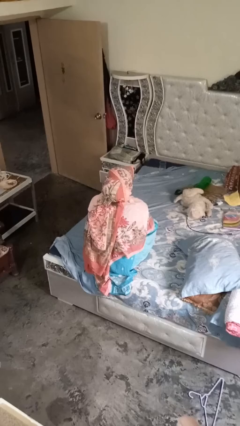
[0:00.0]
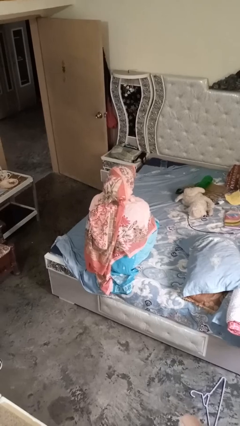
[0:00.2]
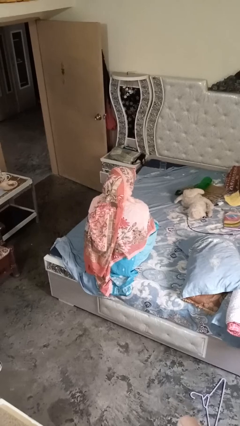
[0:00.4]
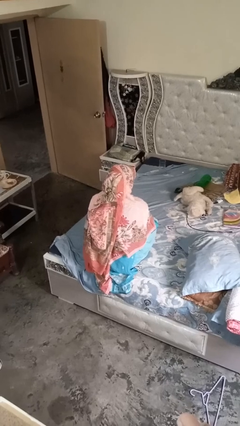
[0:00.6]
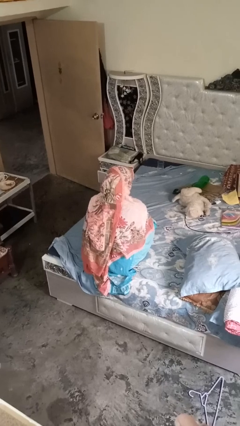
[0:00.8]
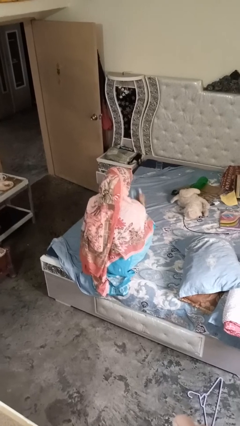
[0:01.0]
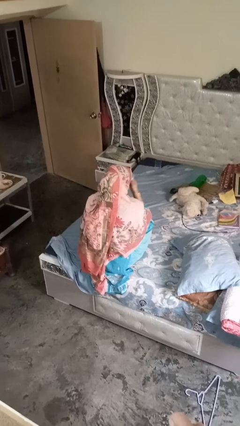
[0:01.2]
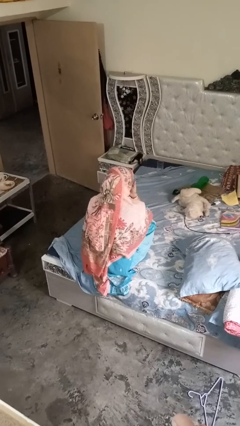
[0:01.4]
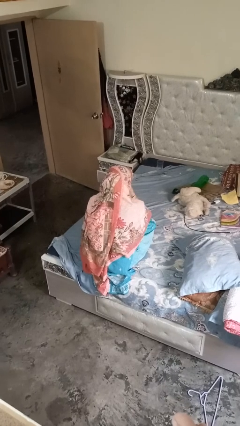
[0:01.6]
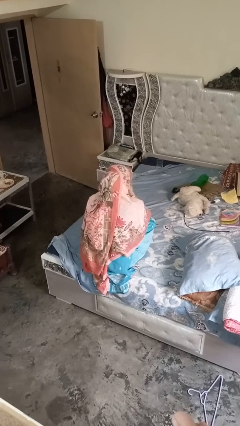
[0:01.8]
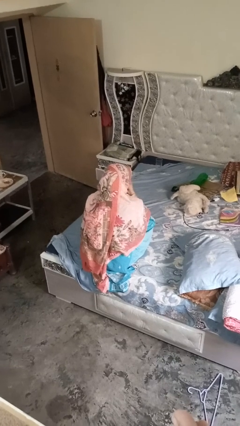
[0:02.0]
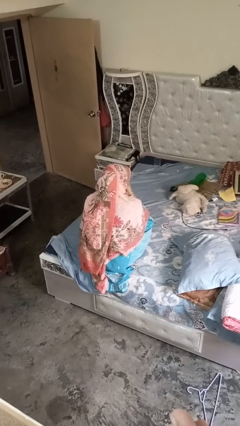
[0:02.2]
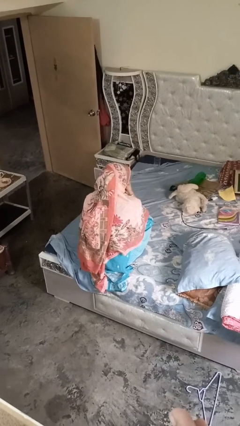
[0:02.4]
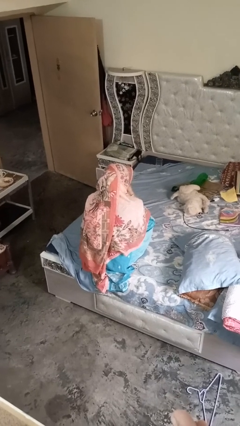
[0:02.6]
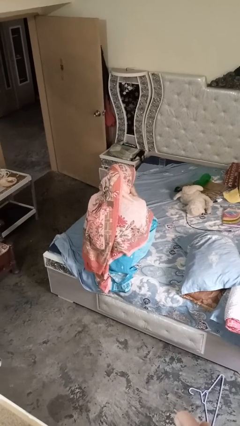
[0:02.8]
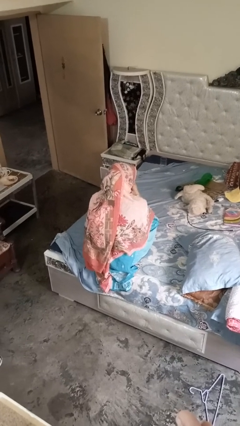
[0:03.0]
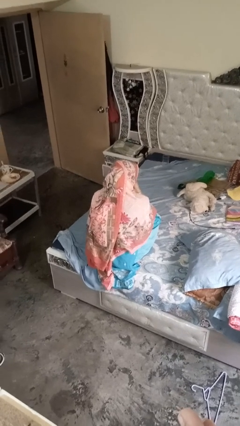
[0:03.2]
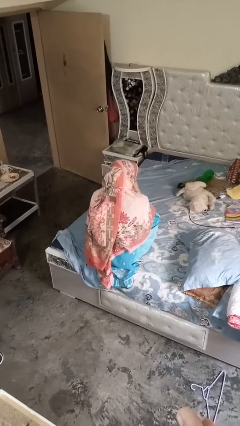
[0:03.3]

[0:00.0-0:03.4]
person rubs foot

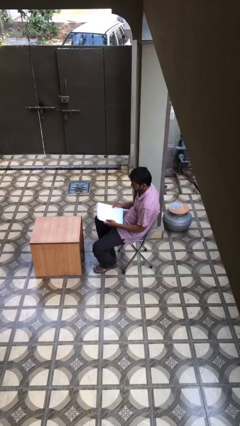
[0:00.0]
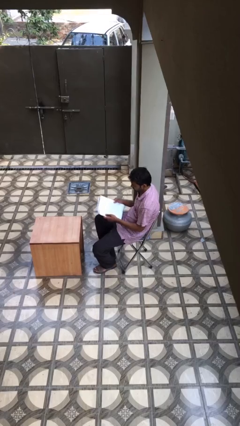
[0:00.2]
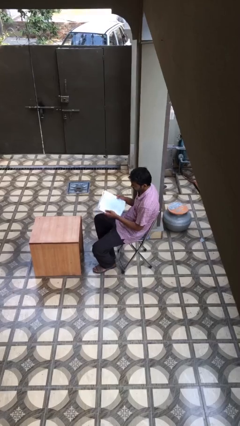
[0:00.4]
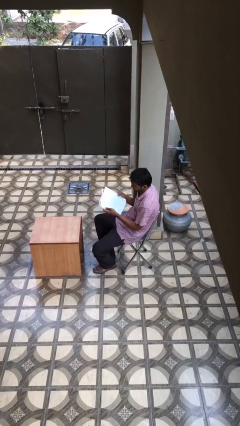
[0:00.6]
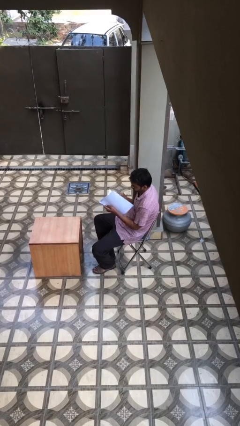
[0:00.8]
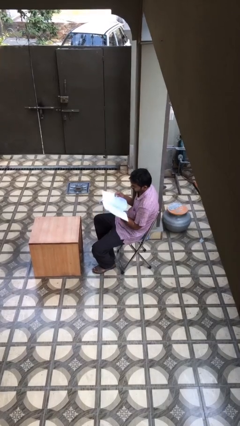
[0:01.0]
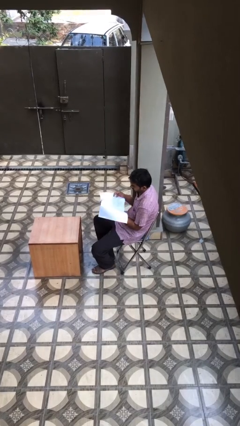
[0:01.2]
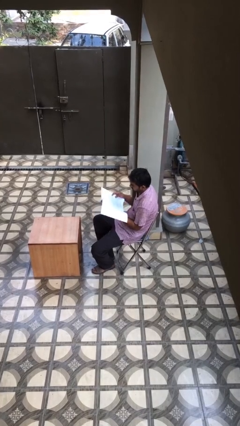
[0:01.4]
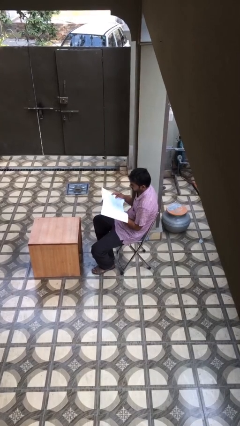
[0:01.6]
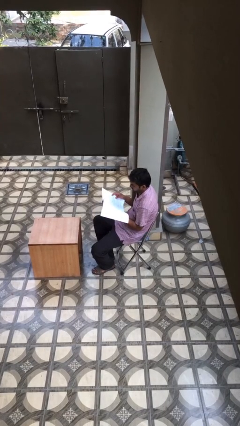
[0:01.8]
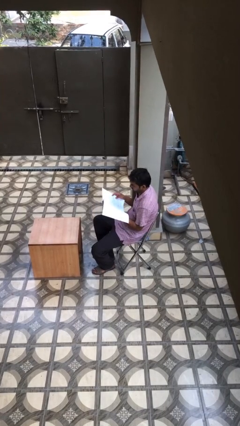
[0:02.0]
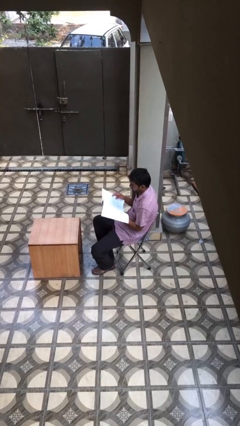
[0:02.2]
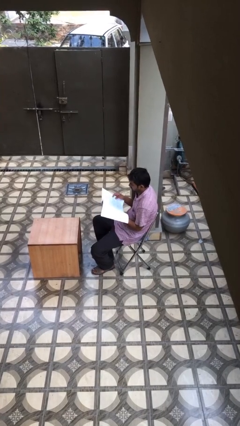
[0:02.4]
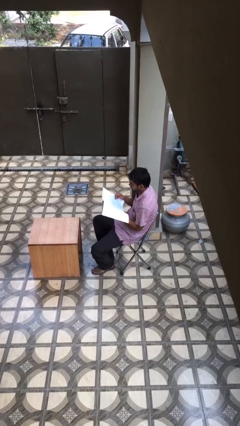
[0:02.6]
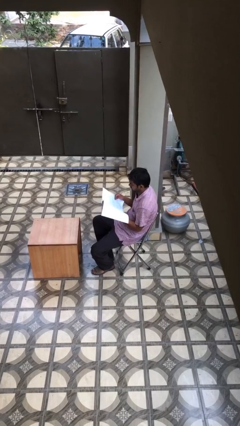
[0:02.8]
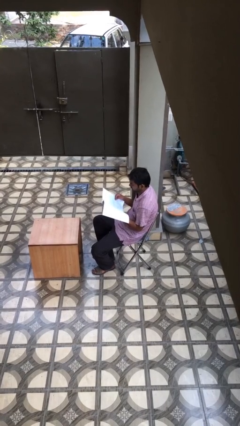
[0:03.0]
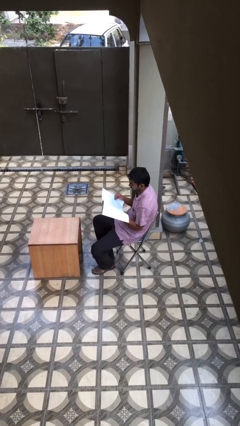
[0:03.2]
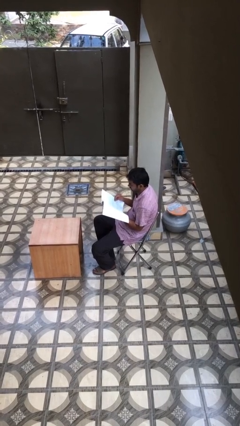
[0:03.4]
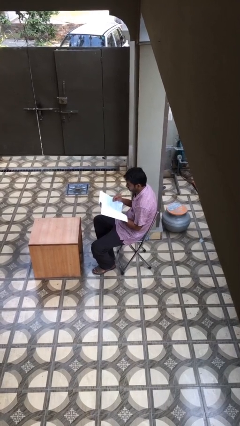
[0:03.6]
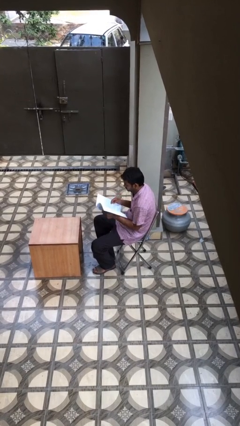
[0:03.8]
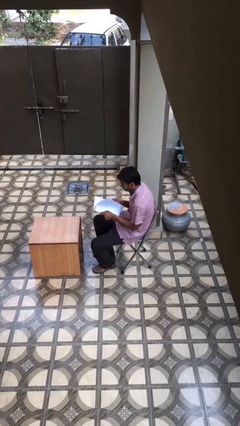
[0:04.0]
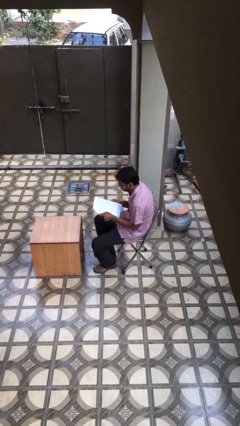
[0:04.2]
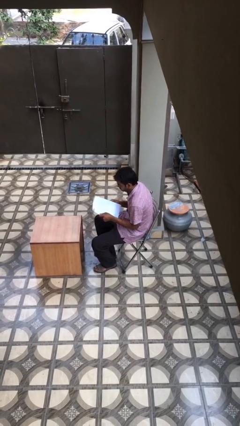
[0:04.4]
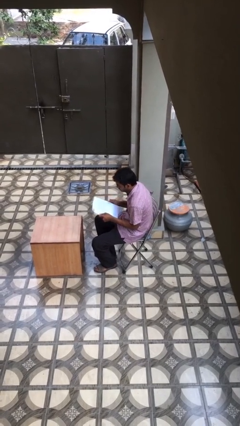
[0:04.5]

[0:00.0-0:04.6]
person reads document

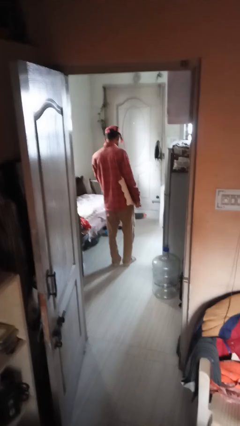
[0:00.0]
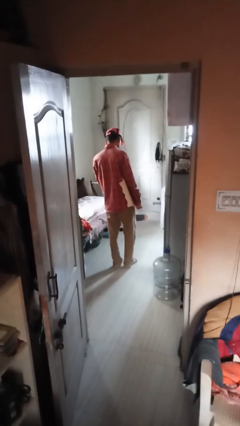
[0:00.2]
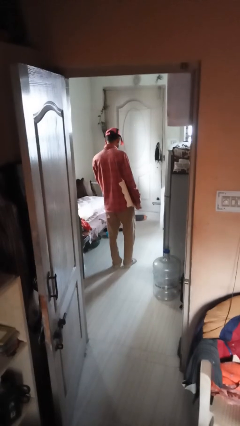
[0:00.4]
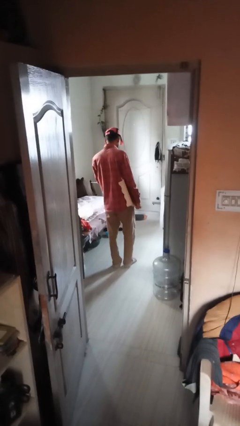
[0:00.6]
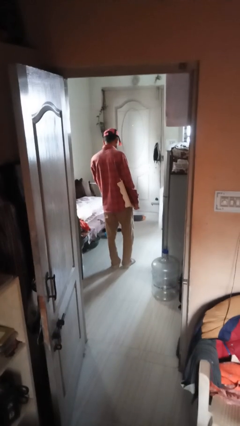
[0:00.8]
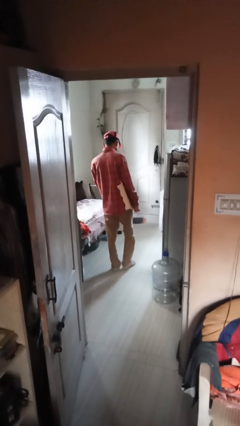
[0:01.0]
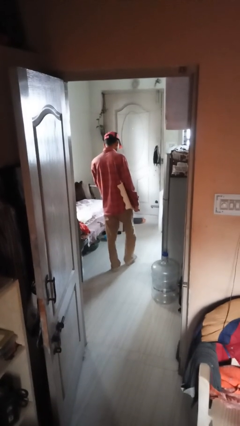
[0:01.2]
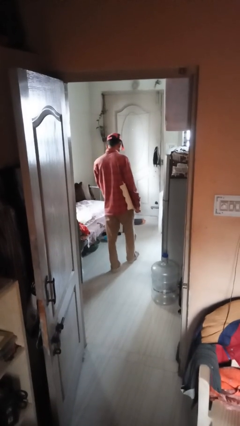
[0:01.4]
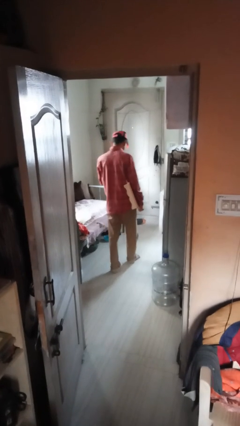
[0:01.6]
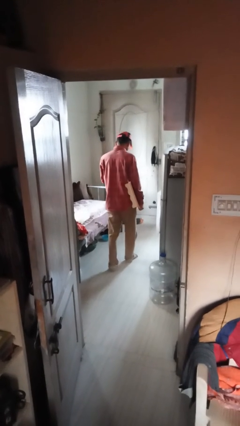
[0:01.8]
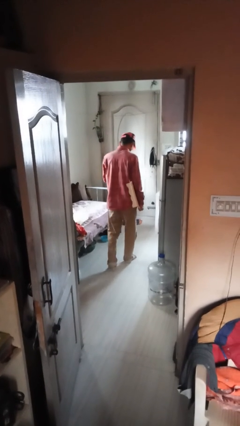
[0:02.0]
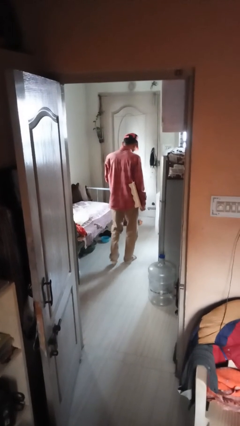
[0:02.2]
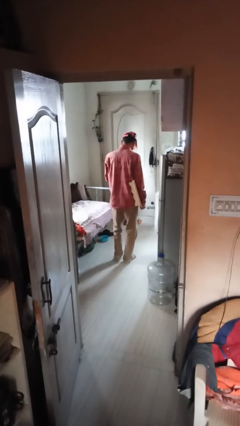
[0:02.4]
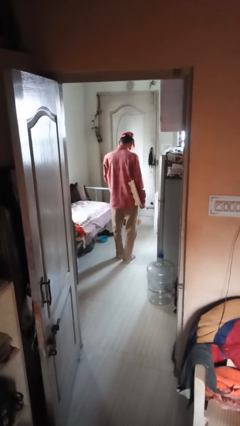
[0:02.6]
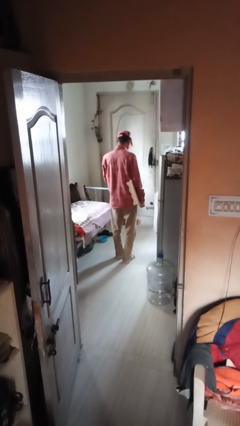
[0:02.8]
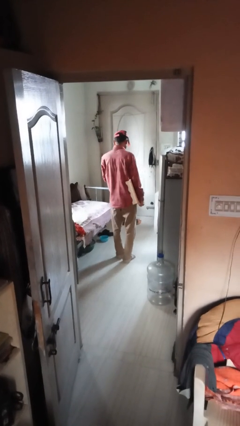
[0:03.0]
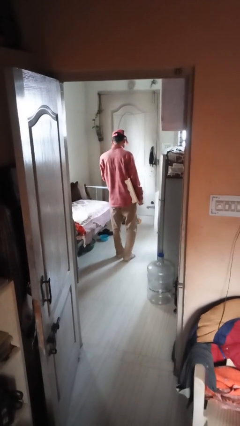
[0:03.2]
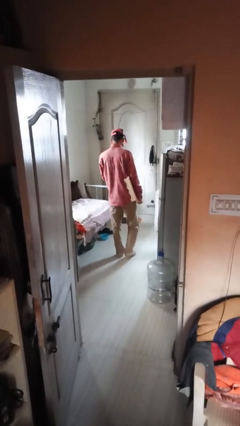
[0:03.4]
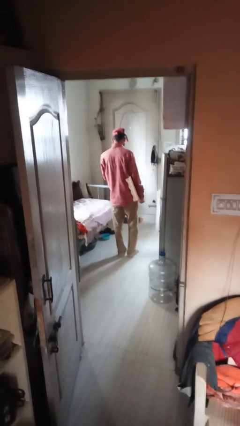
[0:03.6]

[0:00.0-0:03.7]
person carries furniture

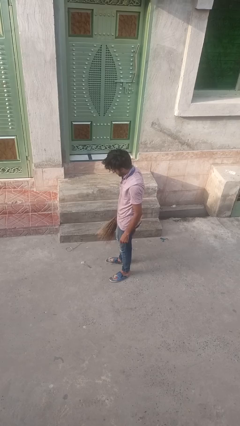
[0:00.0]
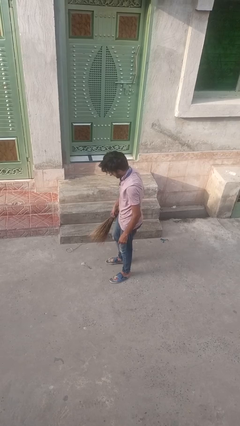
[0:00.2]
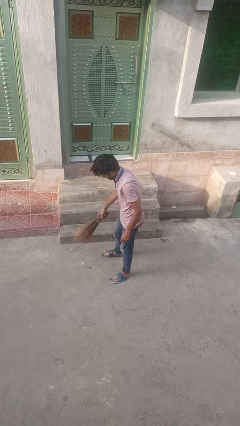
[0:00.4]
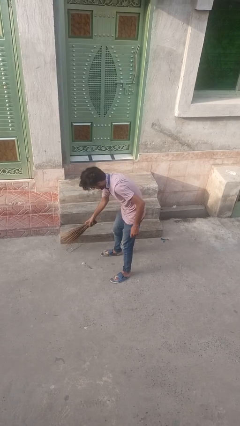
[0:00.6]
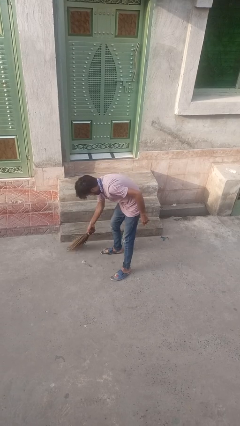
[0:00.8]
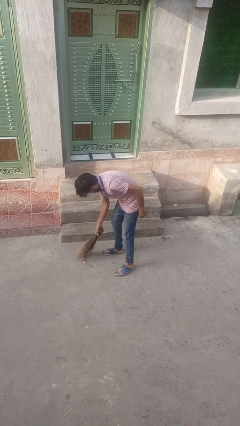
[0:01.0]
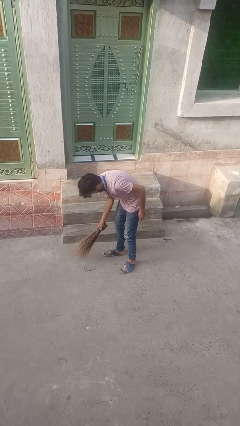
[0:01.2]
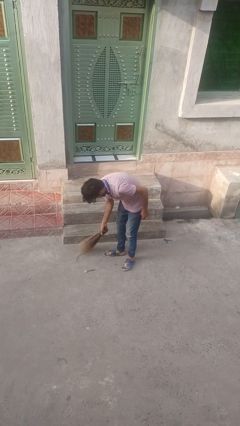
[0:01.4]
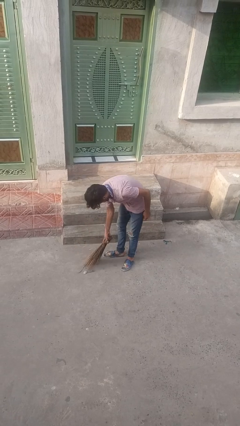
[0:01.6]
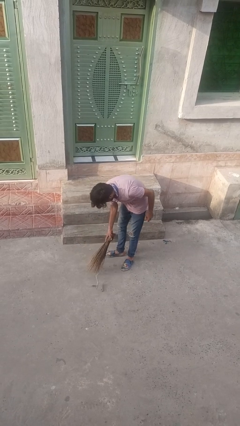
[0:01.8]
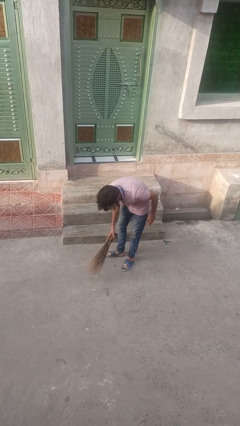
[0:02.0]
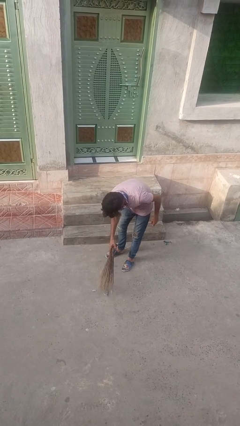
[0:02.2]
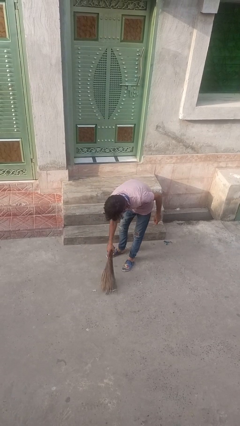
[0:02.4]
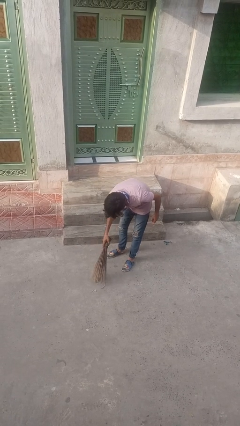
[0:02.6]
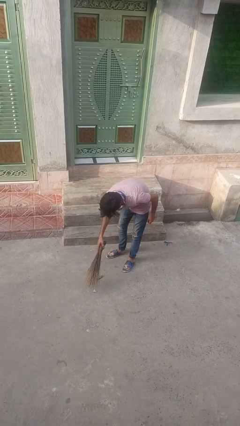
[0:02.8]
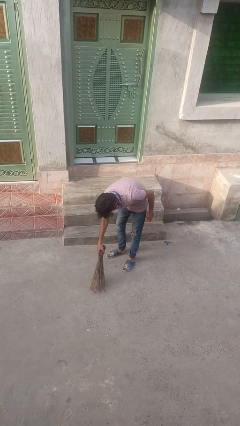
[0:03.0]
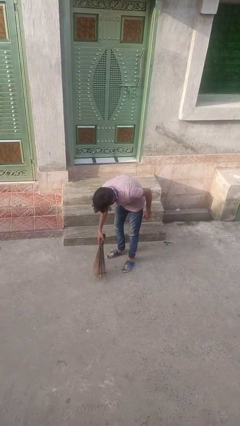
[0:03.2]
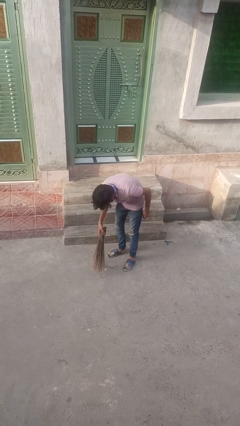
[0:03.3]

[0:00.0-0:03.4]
person sweeps floor

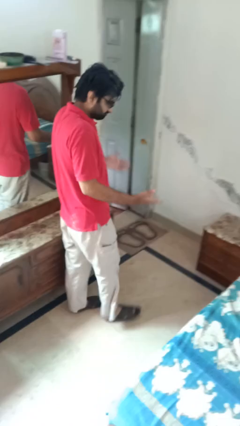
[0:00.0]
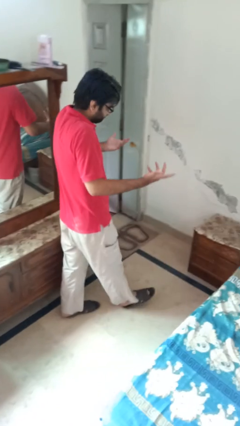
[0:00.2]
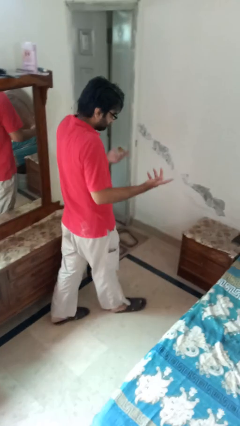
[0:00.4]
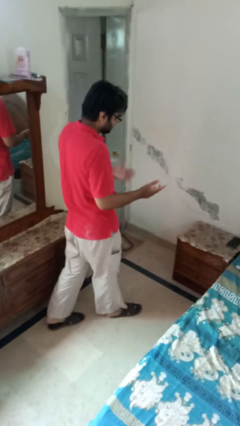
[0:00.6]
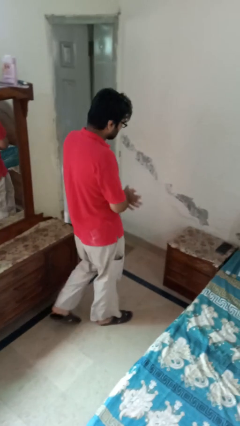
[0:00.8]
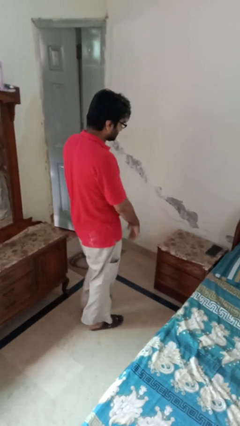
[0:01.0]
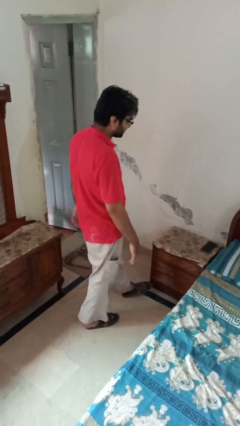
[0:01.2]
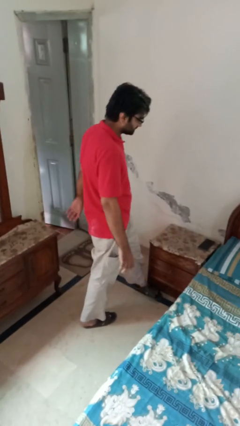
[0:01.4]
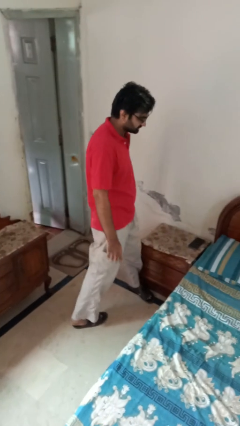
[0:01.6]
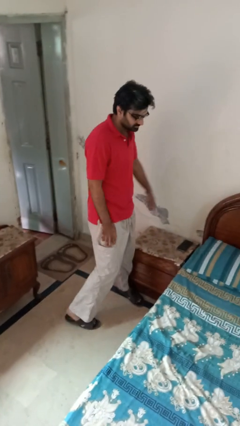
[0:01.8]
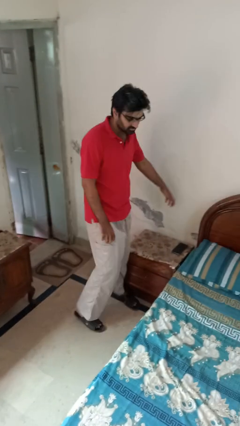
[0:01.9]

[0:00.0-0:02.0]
person shrugs

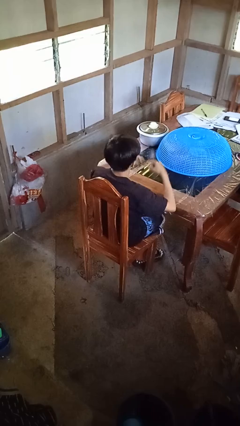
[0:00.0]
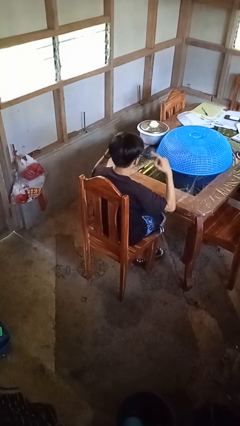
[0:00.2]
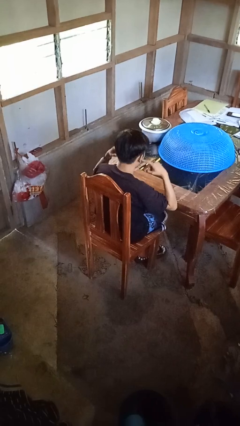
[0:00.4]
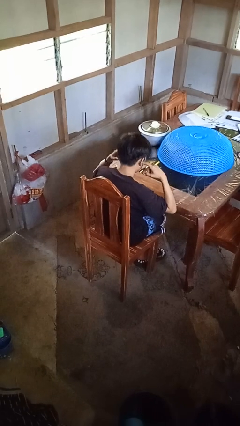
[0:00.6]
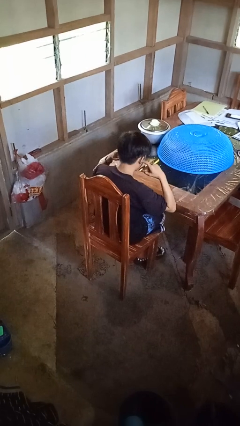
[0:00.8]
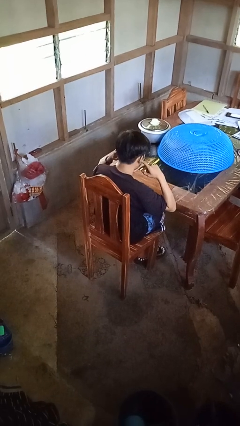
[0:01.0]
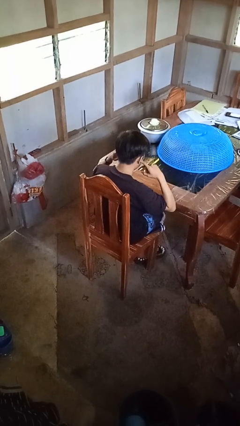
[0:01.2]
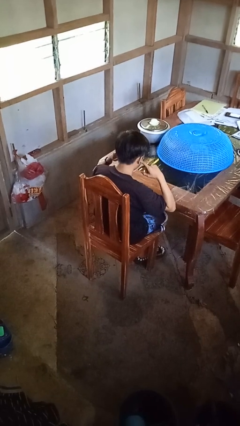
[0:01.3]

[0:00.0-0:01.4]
person puts fingers in ear
